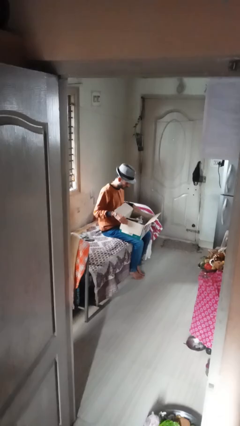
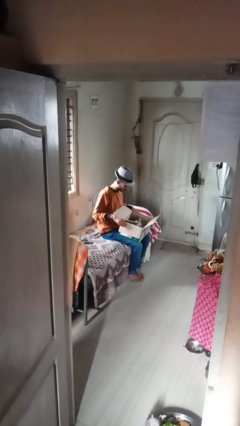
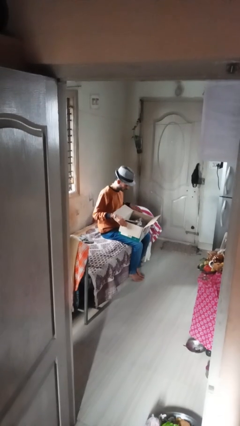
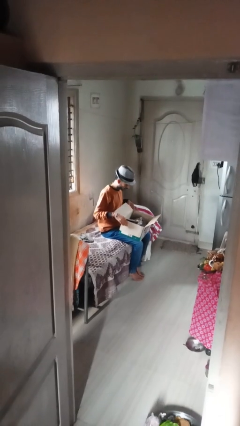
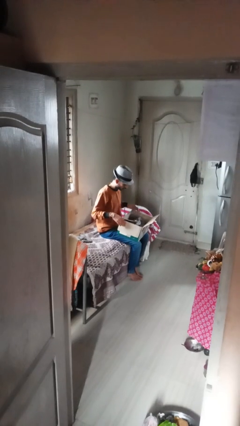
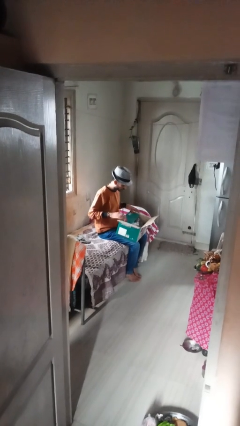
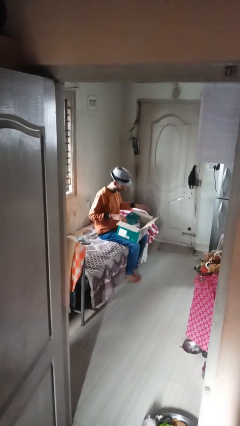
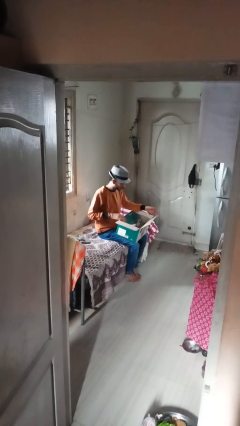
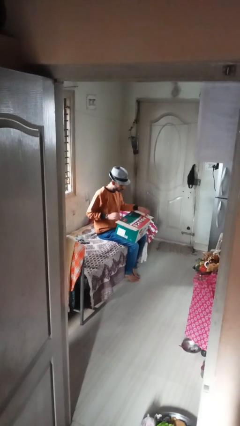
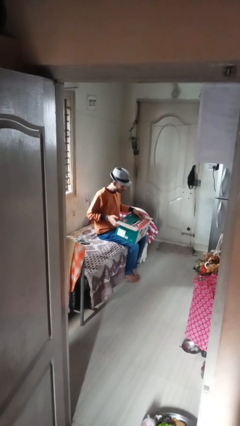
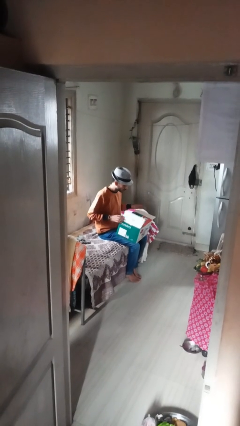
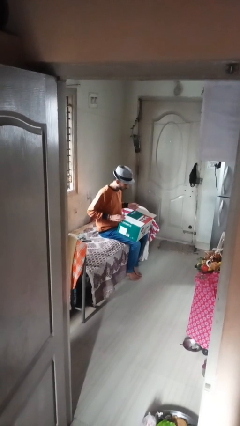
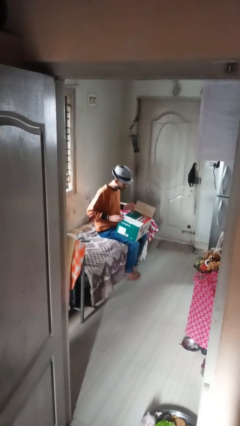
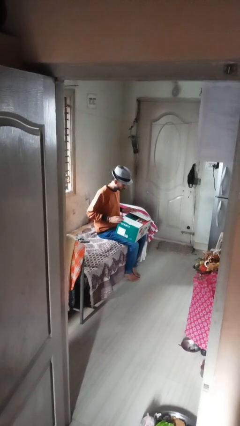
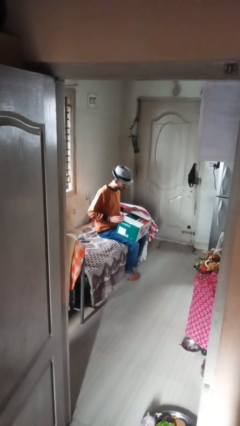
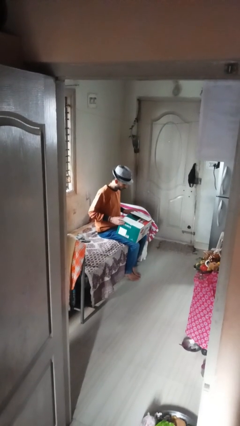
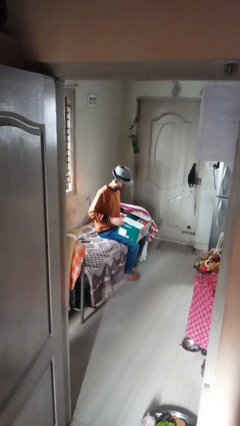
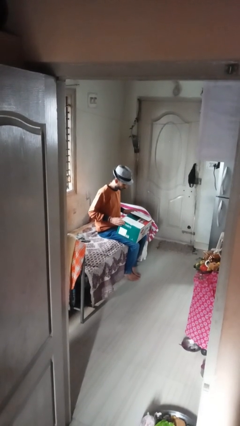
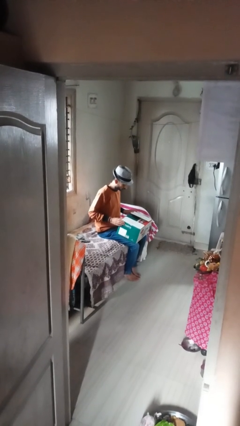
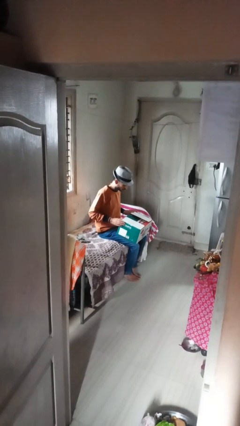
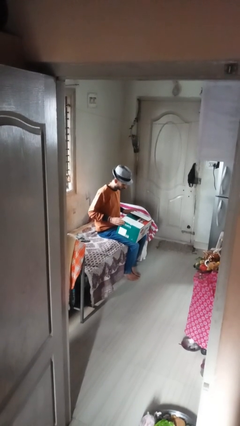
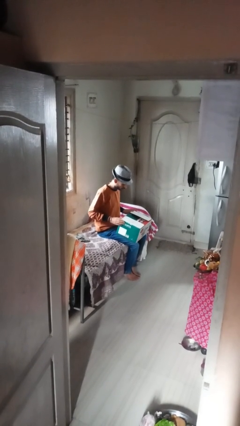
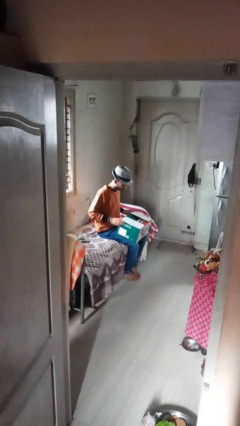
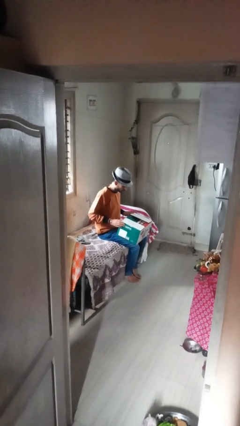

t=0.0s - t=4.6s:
person closes box

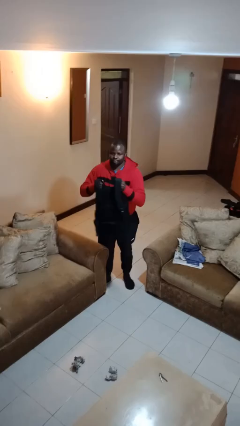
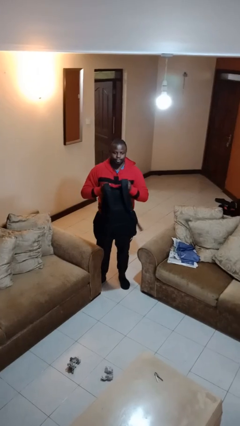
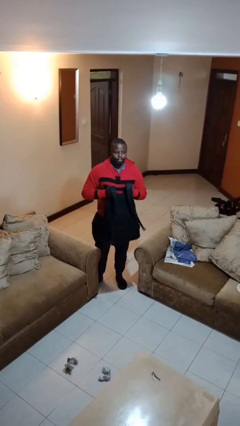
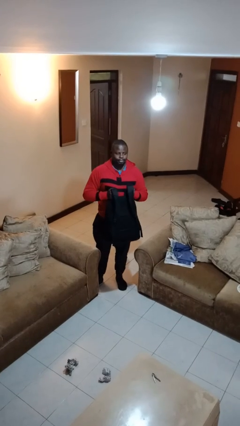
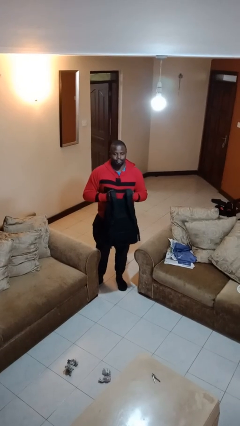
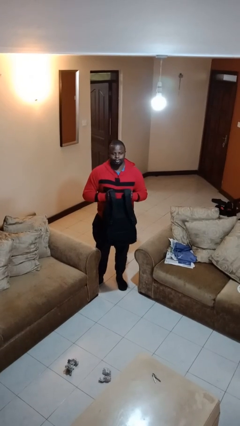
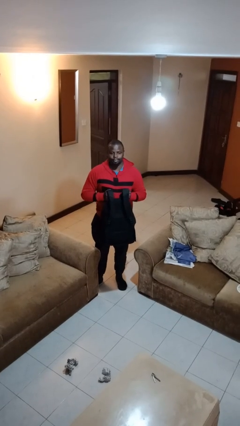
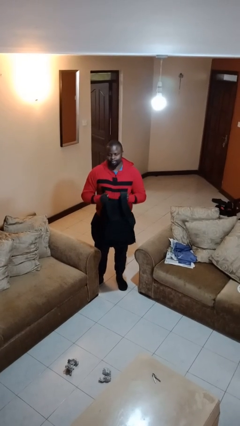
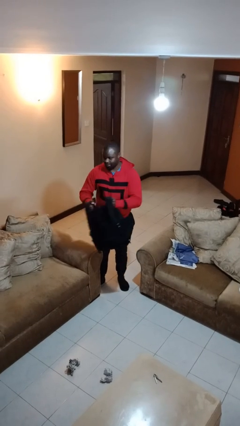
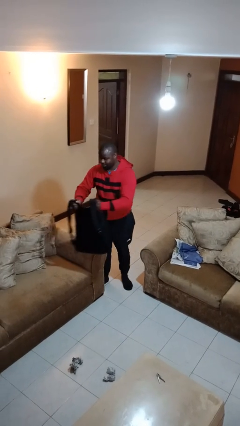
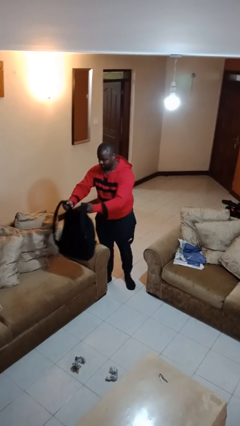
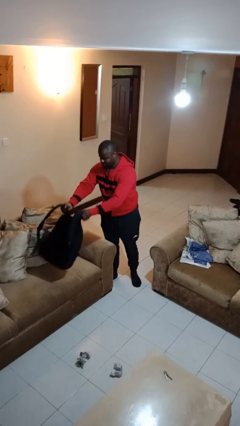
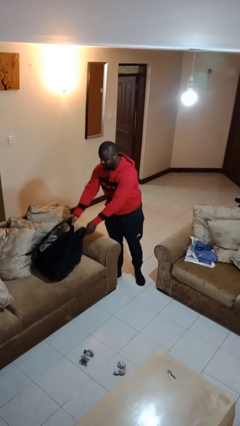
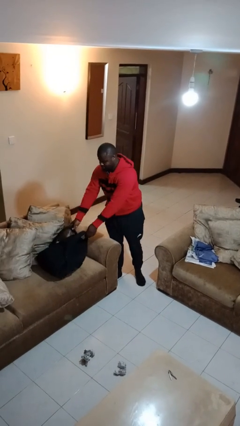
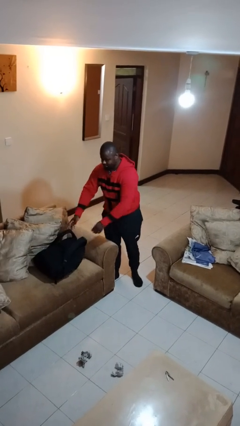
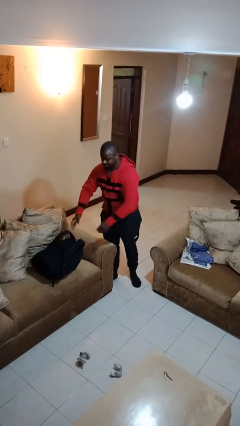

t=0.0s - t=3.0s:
person puts down object on couch

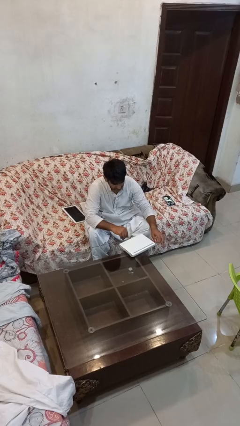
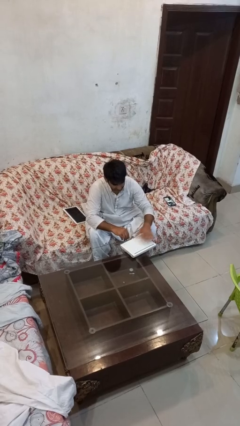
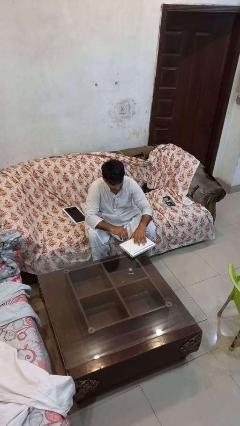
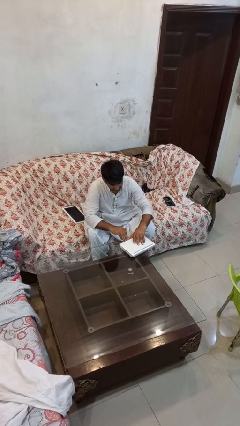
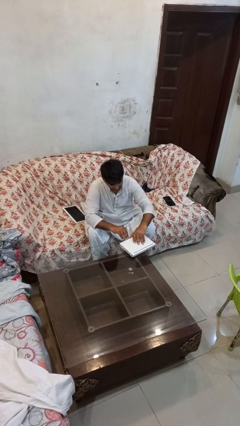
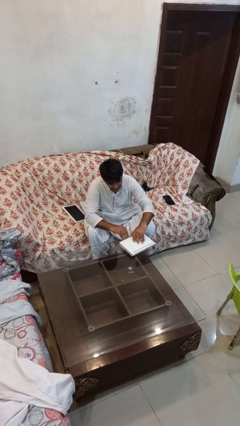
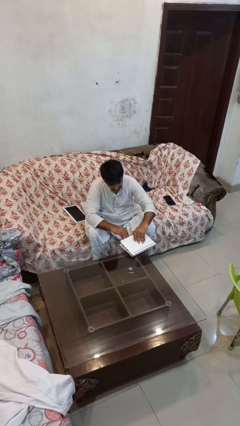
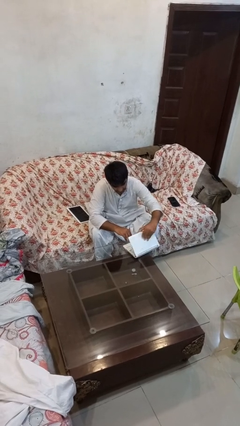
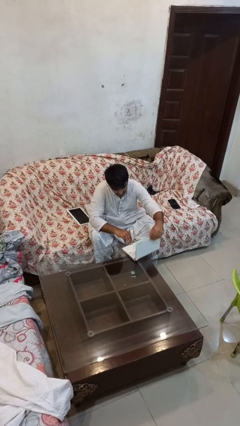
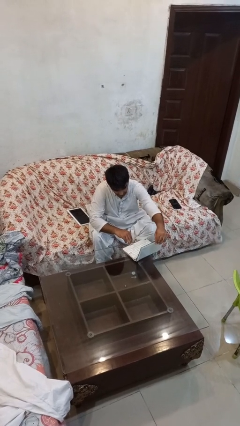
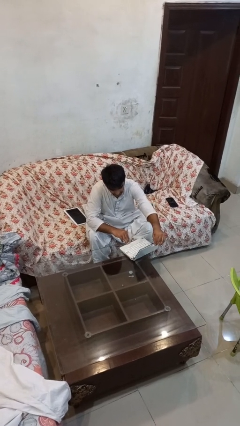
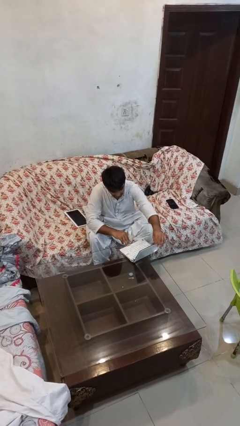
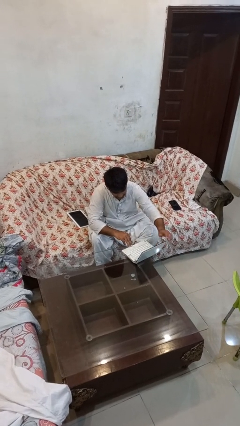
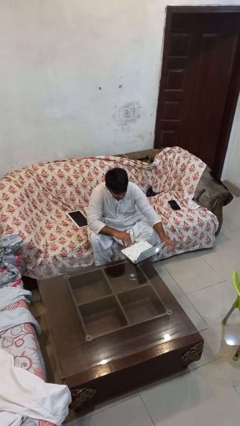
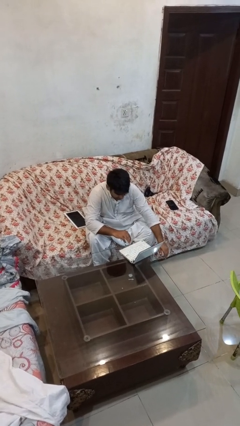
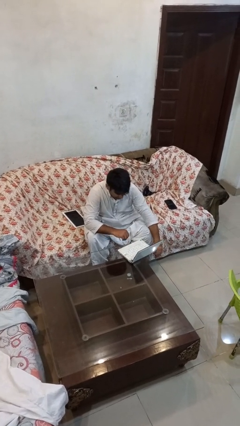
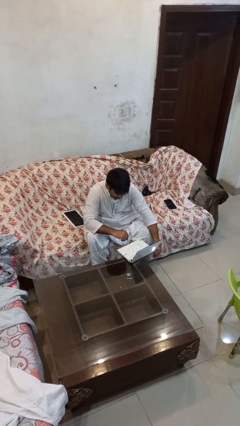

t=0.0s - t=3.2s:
person opens laptop

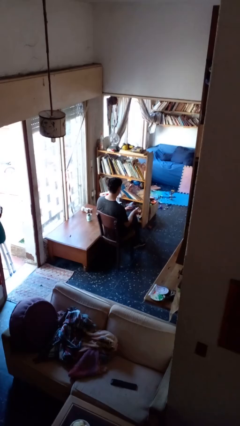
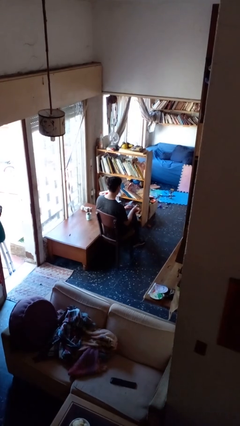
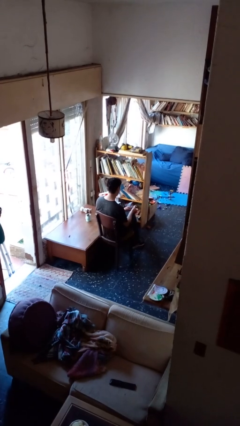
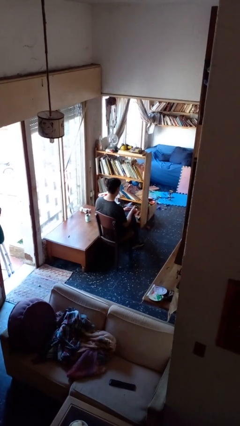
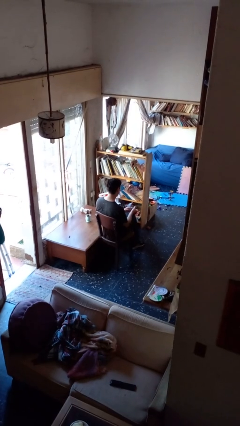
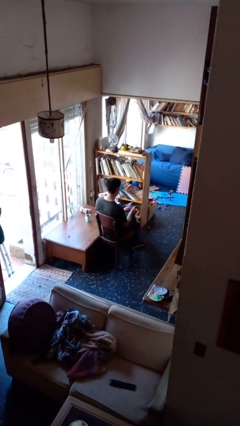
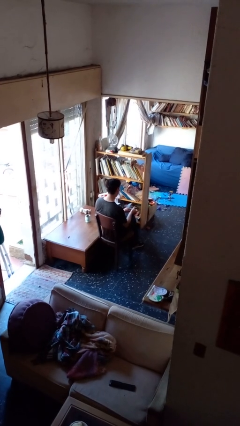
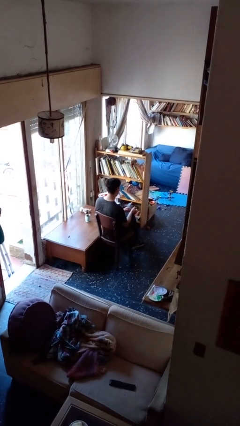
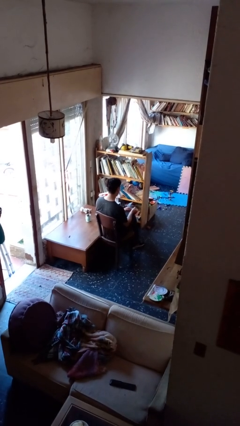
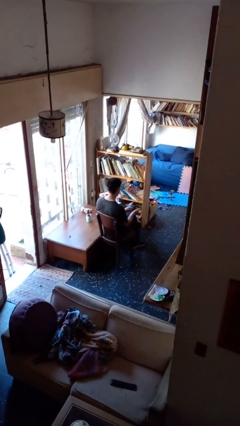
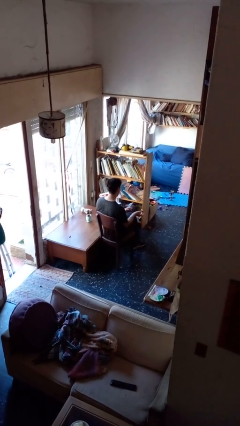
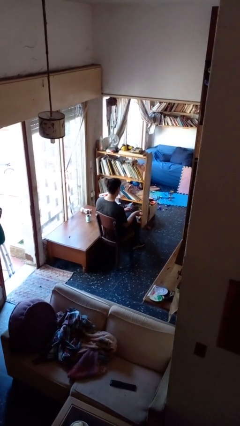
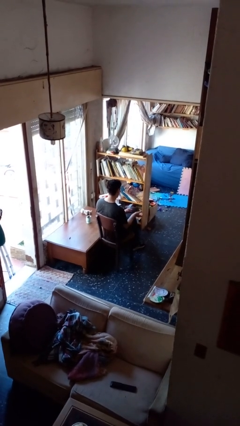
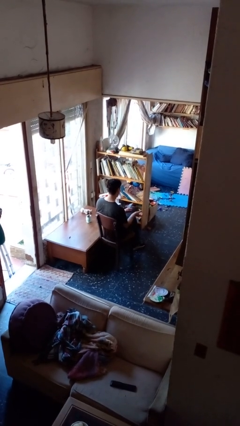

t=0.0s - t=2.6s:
person clips fingernails

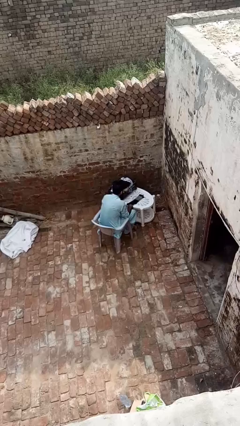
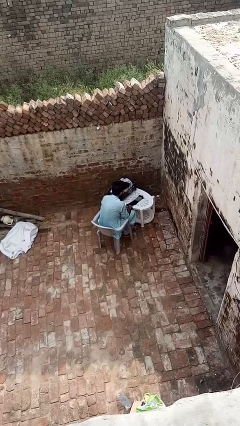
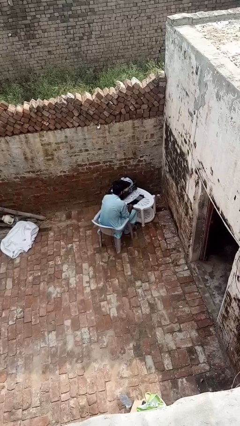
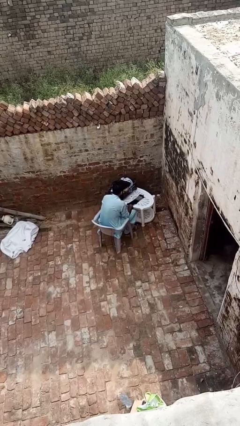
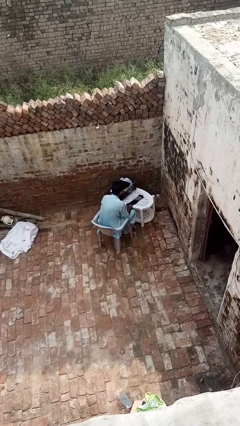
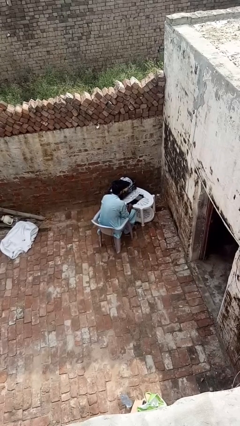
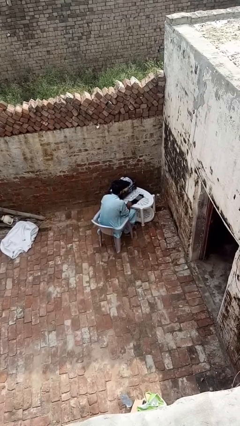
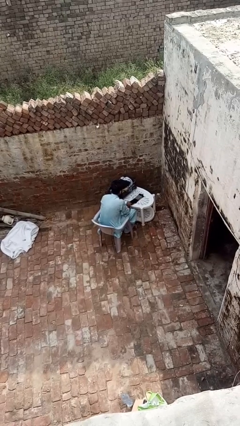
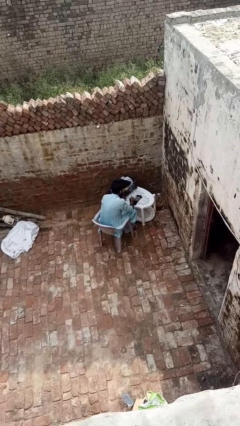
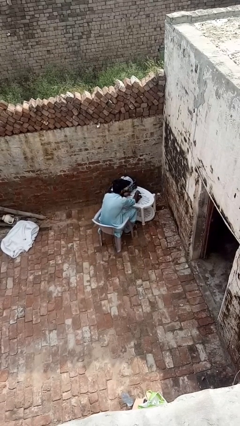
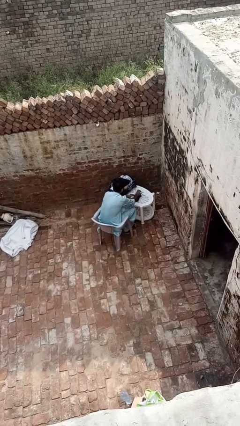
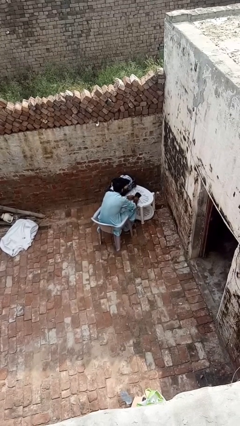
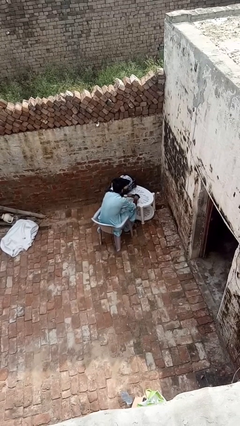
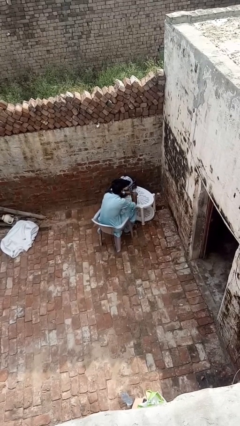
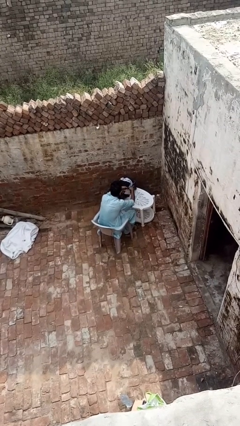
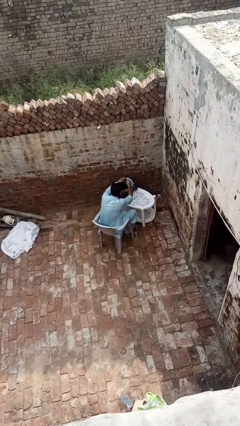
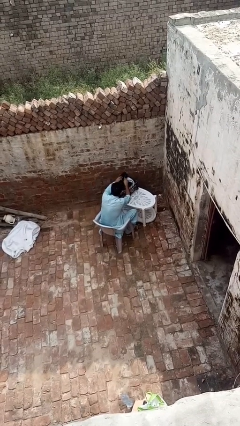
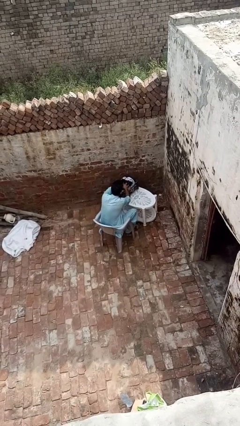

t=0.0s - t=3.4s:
person folds socks

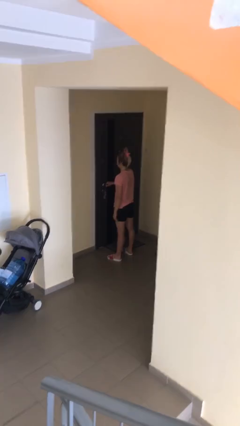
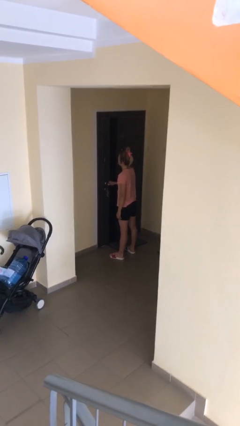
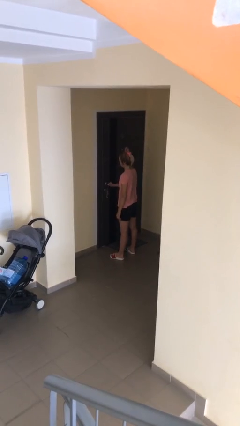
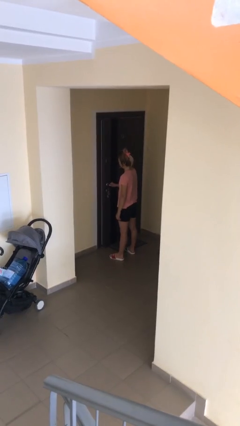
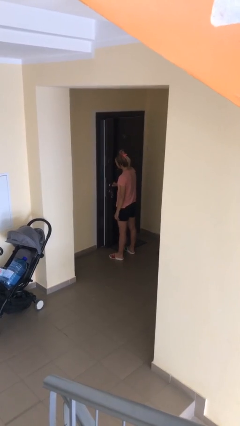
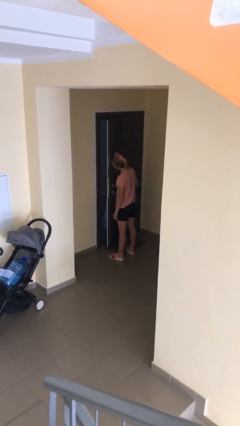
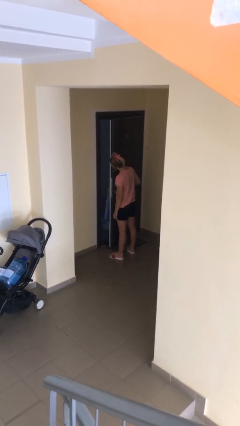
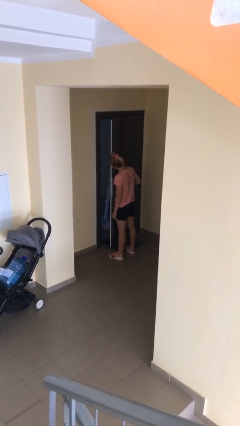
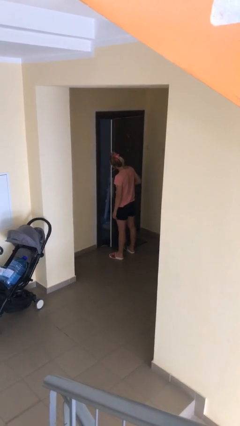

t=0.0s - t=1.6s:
person opens facility door
